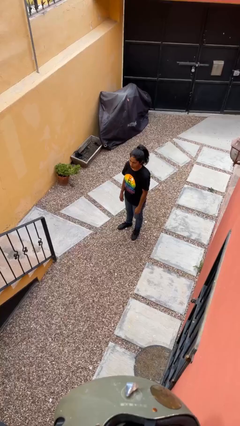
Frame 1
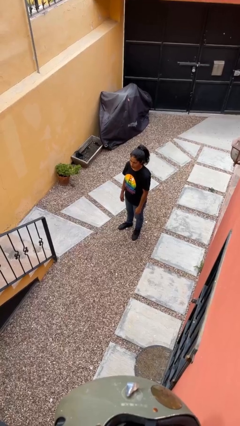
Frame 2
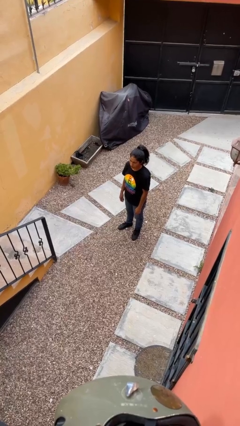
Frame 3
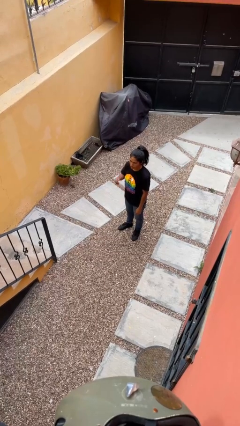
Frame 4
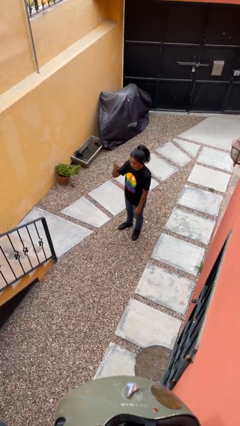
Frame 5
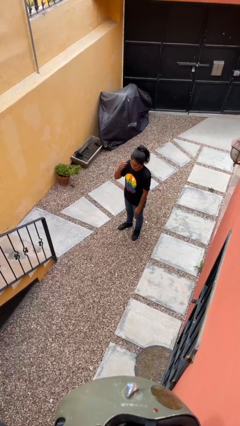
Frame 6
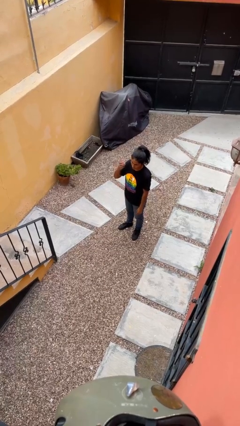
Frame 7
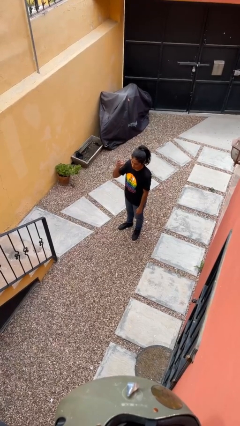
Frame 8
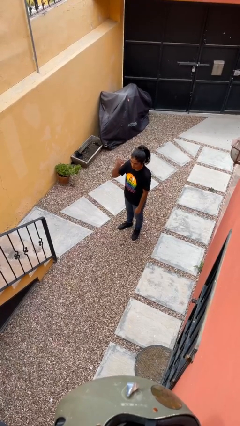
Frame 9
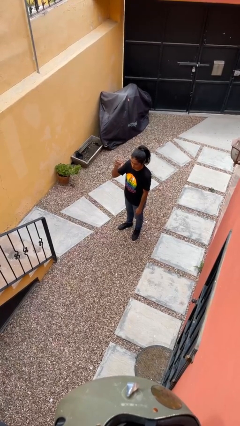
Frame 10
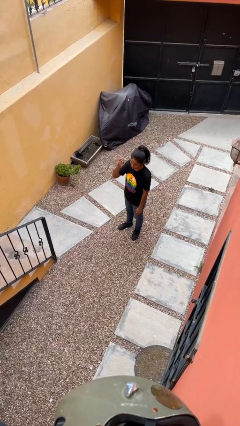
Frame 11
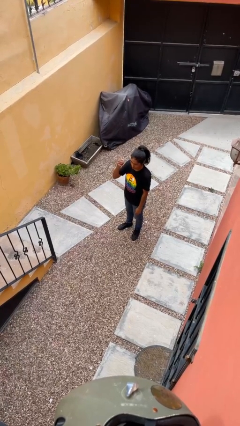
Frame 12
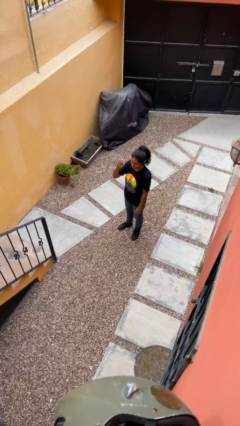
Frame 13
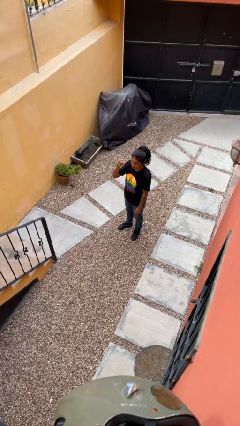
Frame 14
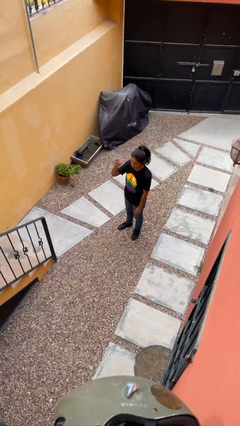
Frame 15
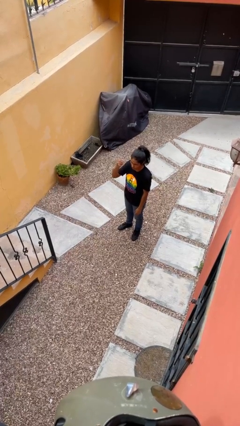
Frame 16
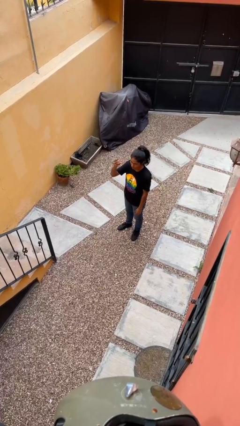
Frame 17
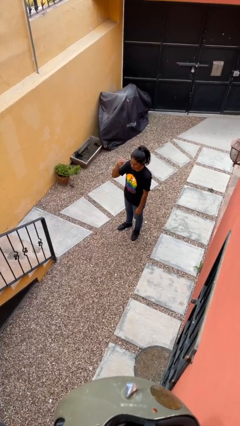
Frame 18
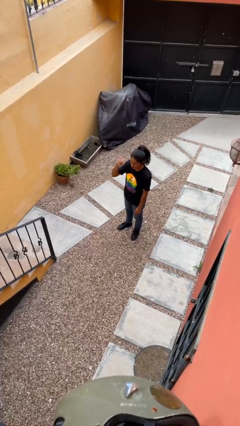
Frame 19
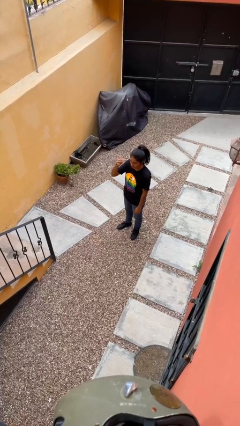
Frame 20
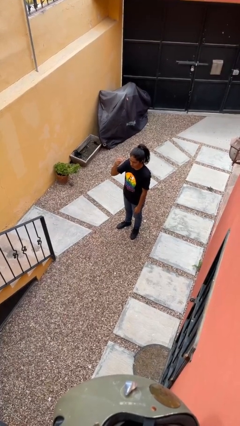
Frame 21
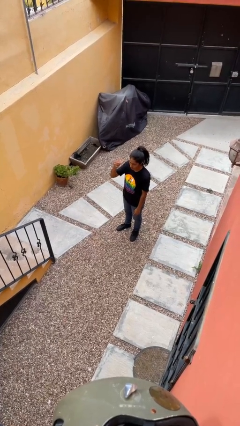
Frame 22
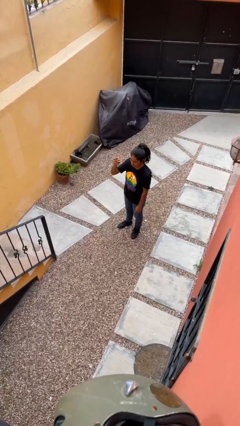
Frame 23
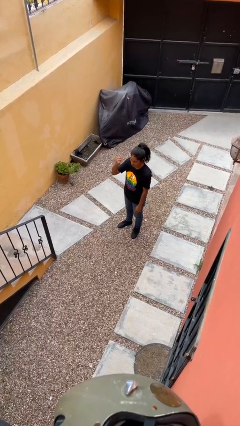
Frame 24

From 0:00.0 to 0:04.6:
person gestures come here

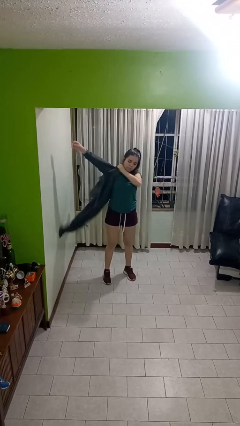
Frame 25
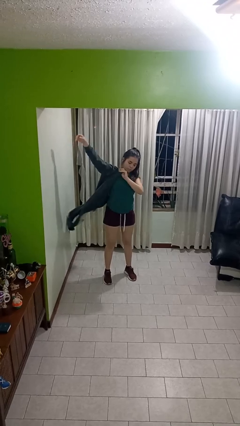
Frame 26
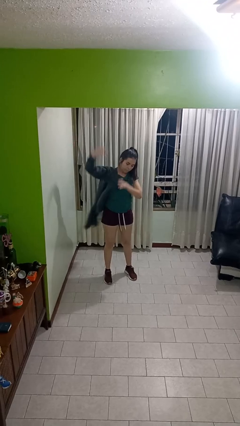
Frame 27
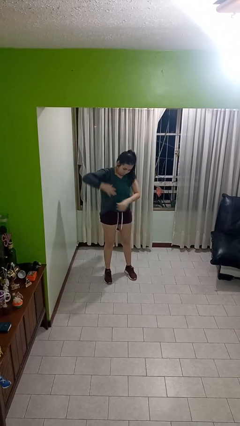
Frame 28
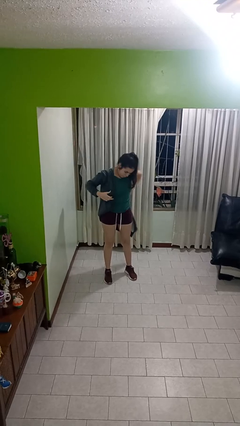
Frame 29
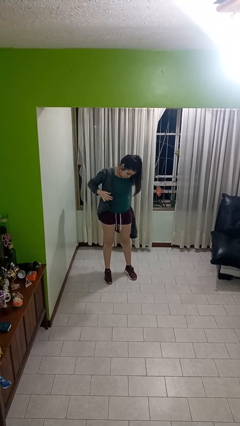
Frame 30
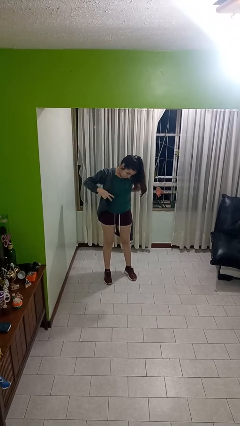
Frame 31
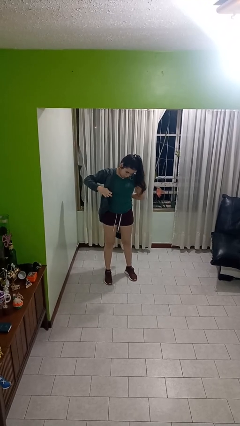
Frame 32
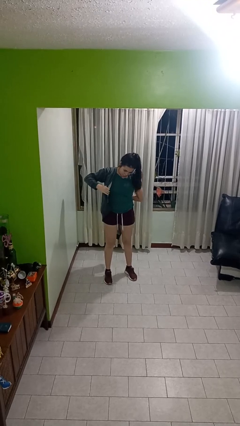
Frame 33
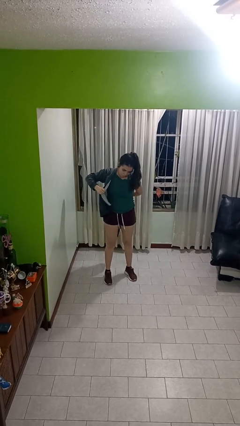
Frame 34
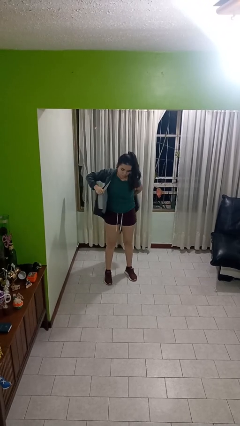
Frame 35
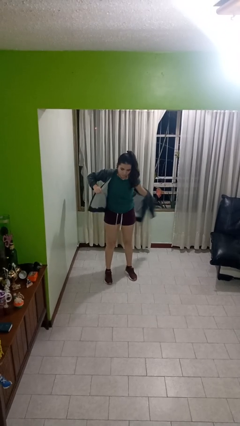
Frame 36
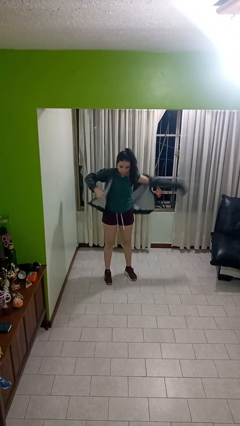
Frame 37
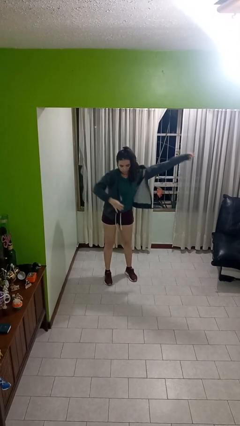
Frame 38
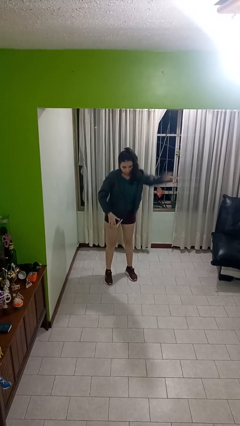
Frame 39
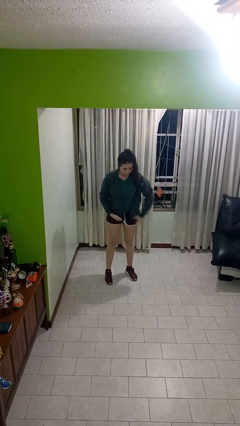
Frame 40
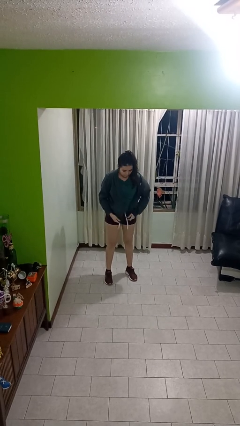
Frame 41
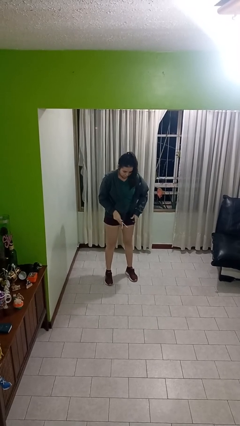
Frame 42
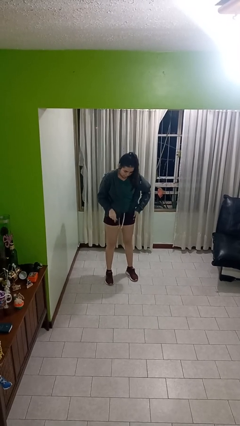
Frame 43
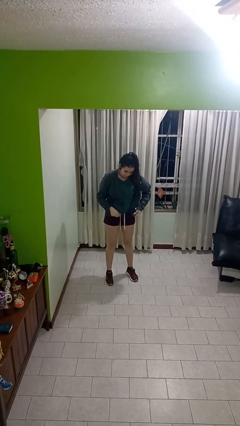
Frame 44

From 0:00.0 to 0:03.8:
person puts on jacket

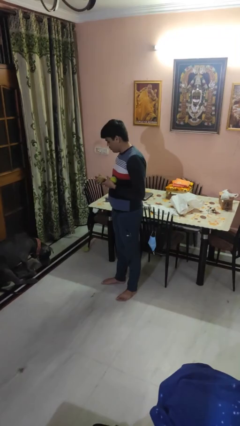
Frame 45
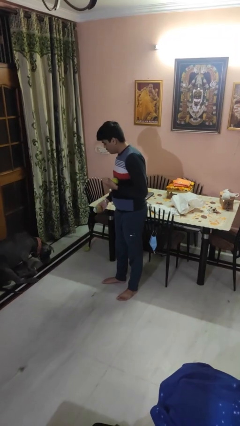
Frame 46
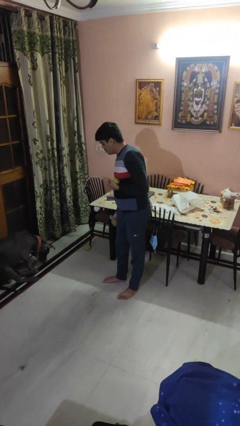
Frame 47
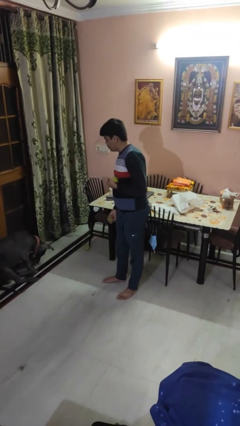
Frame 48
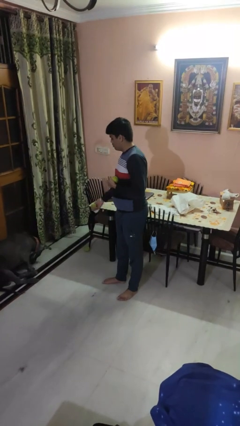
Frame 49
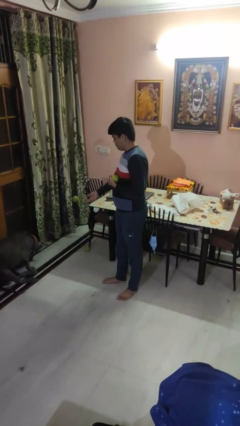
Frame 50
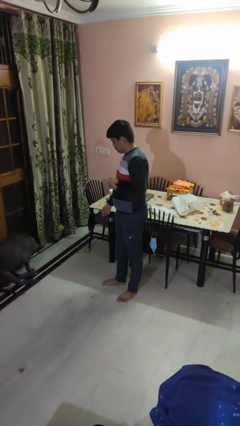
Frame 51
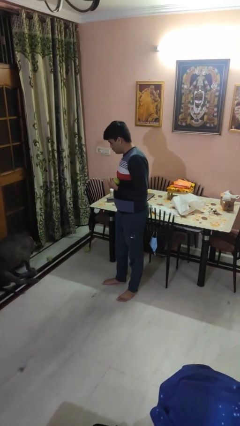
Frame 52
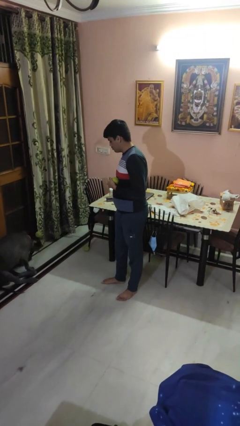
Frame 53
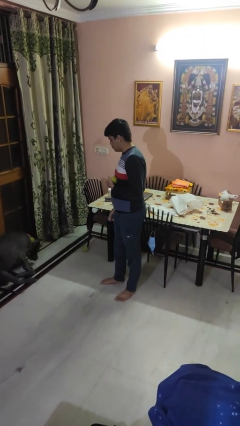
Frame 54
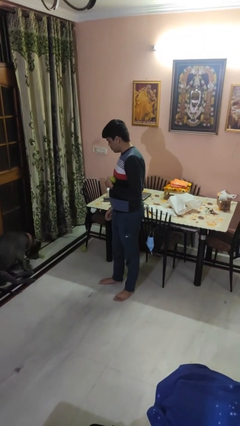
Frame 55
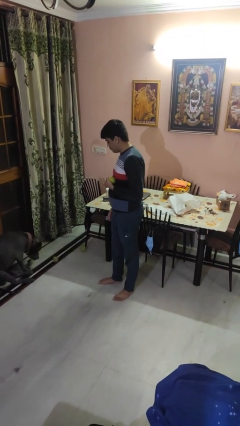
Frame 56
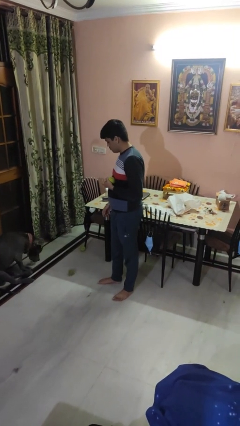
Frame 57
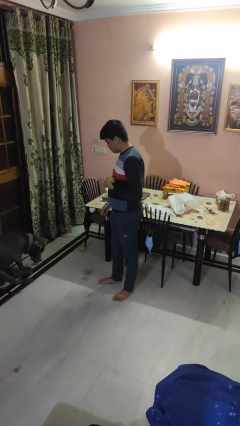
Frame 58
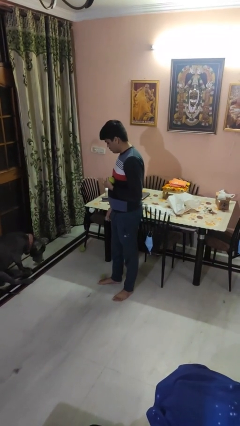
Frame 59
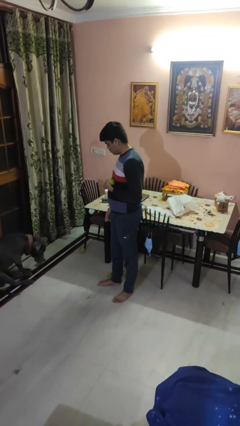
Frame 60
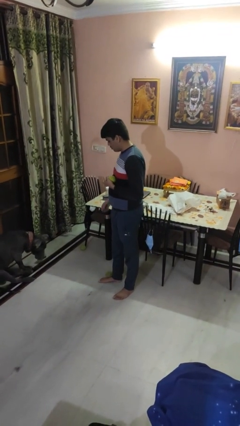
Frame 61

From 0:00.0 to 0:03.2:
person throws object to dog

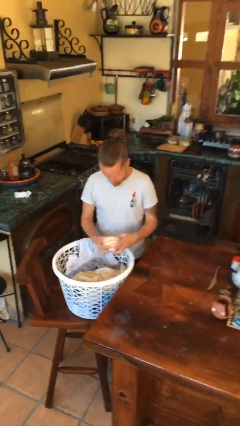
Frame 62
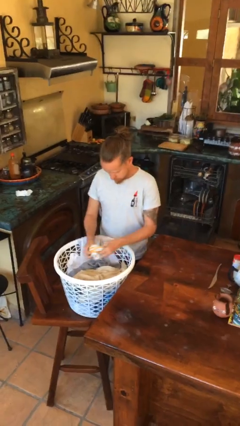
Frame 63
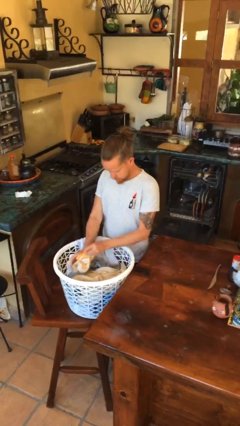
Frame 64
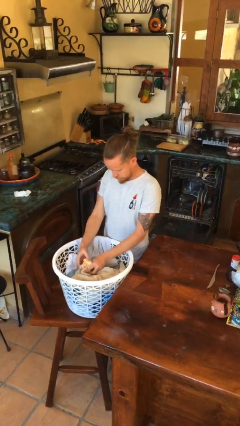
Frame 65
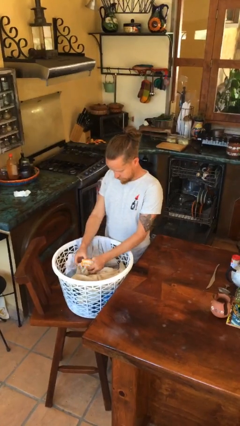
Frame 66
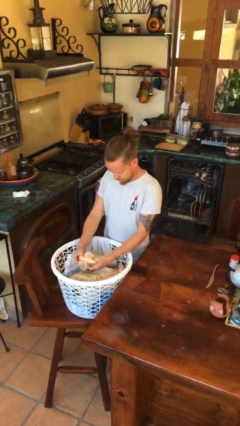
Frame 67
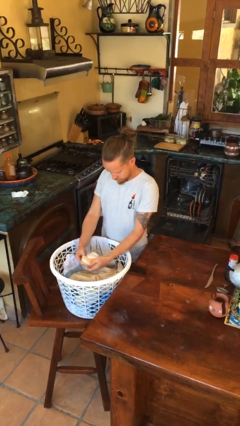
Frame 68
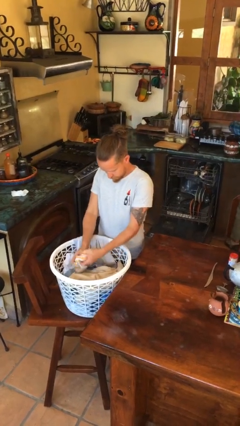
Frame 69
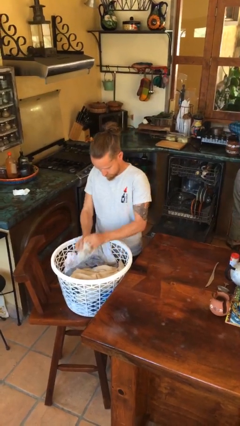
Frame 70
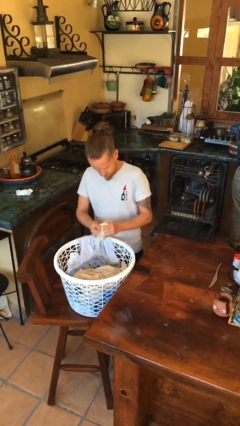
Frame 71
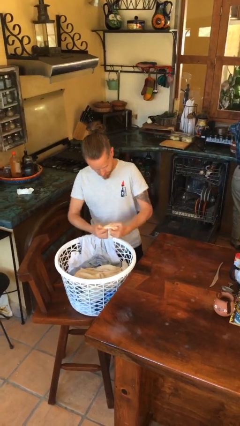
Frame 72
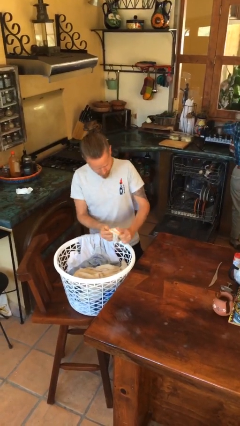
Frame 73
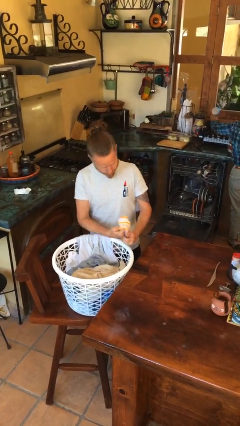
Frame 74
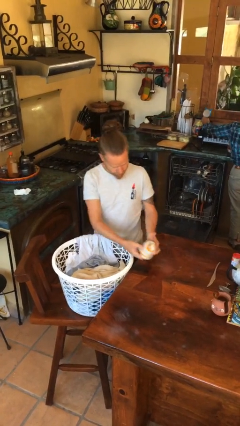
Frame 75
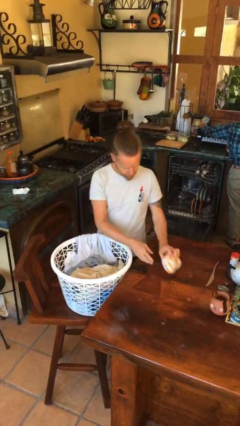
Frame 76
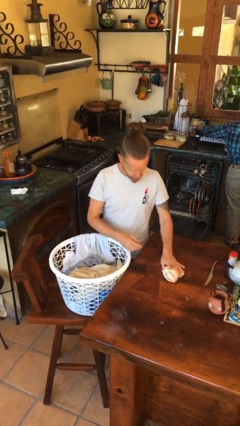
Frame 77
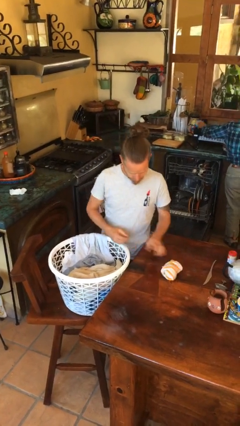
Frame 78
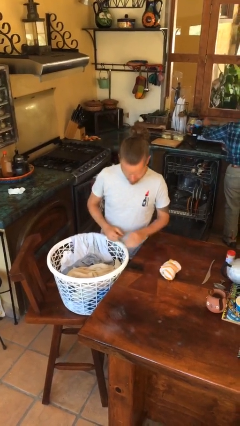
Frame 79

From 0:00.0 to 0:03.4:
person folds socks

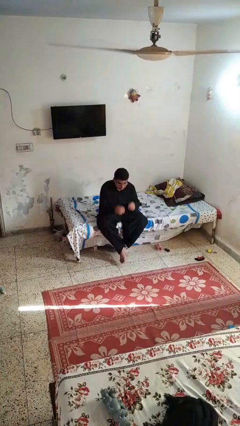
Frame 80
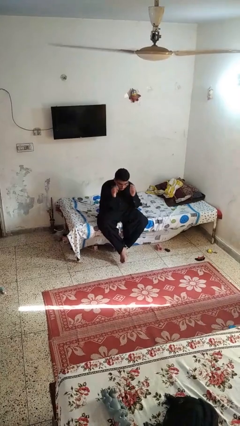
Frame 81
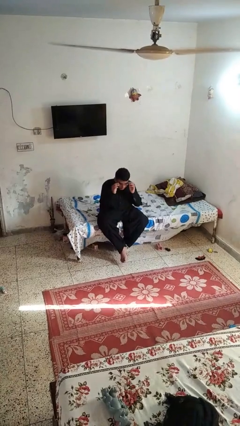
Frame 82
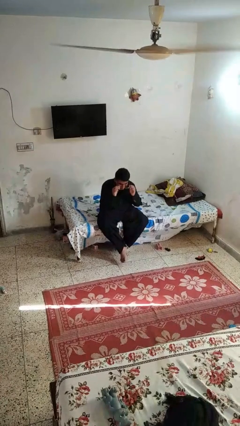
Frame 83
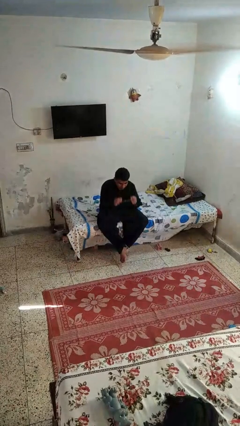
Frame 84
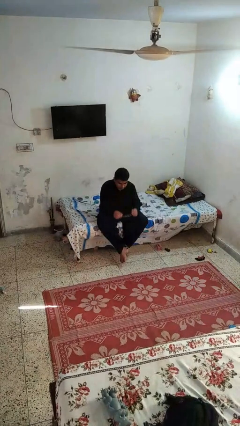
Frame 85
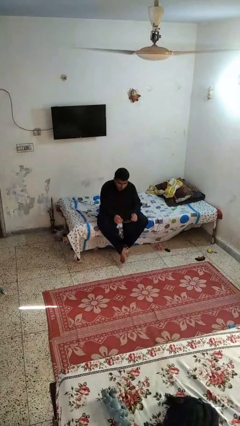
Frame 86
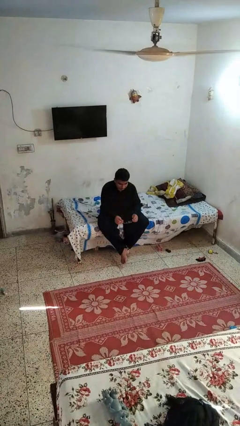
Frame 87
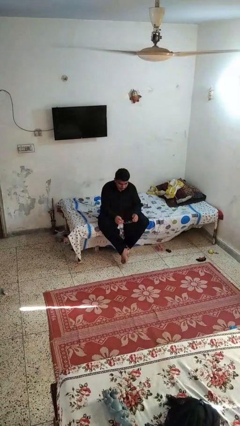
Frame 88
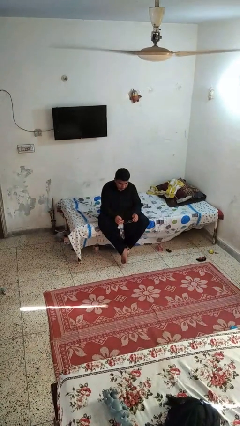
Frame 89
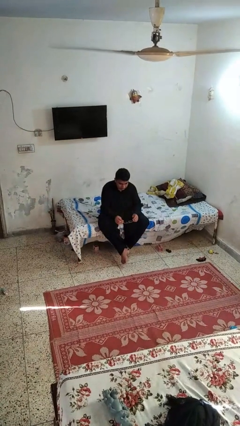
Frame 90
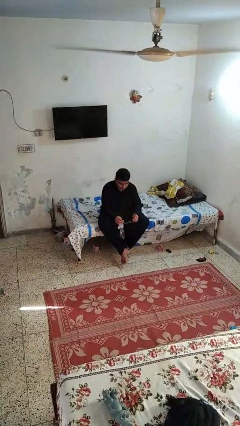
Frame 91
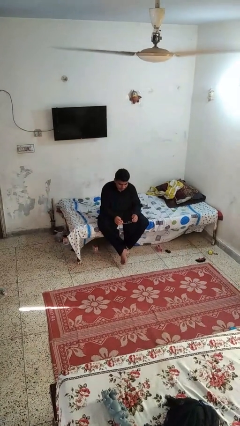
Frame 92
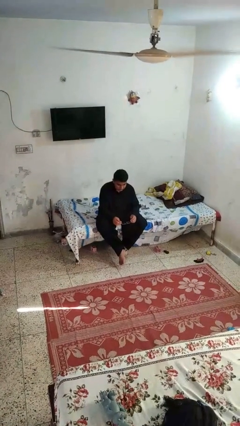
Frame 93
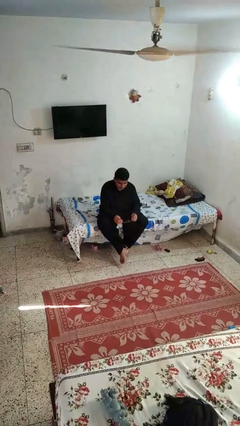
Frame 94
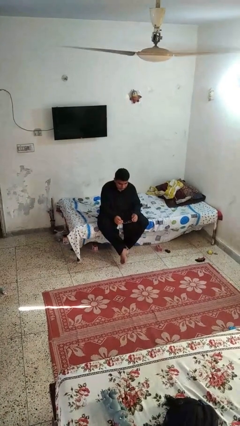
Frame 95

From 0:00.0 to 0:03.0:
person takes off glasses
